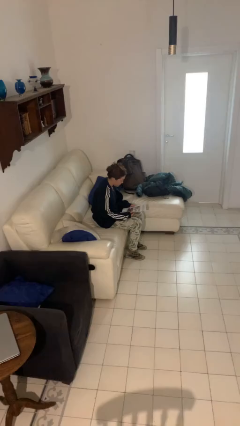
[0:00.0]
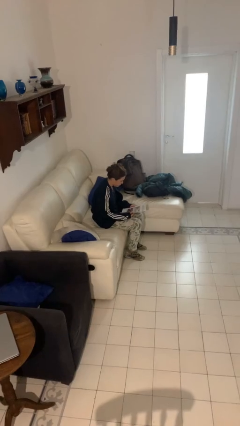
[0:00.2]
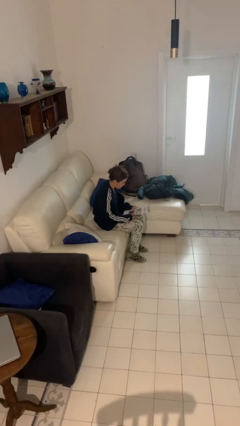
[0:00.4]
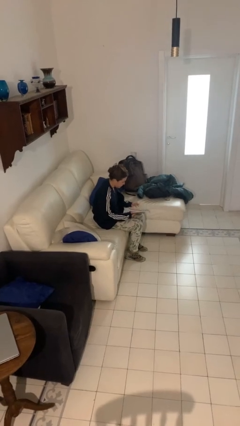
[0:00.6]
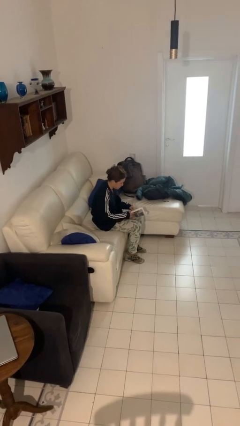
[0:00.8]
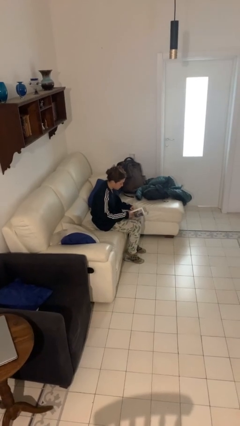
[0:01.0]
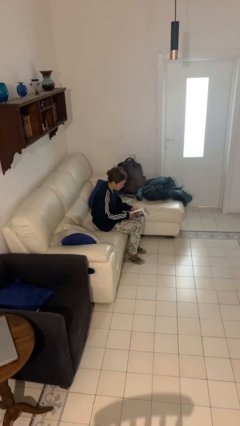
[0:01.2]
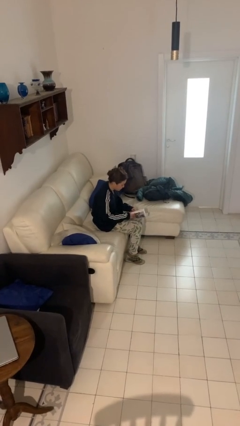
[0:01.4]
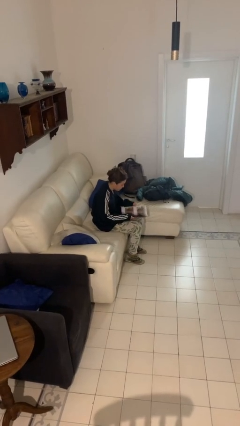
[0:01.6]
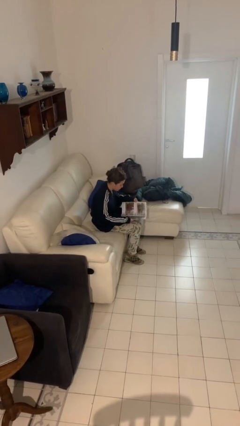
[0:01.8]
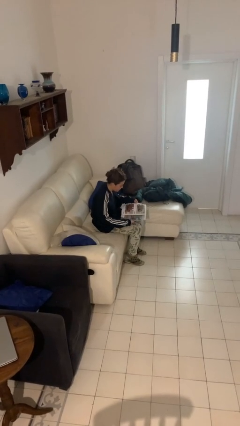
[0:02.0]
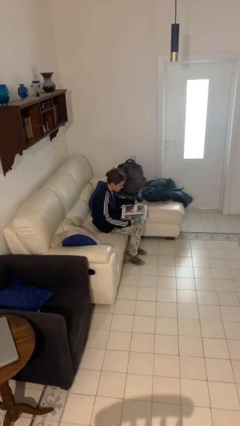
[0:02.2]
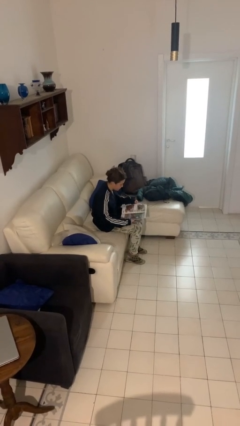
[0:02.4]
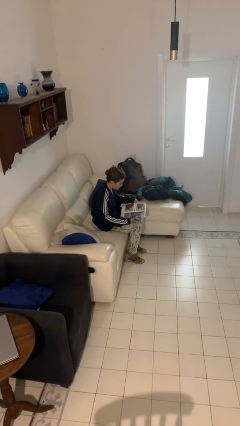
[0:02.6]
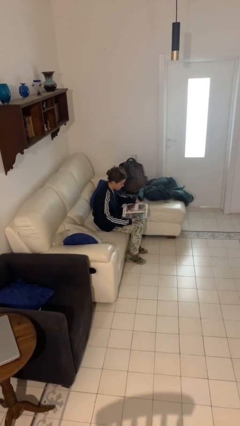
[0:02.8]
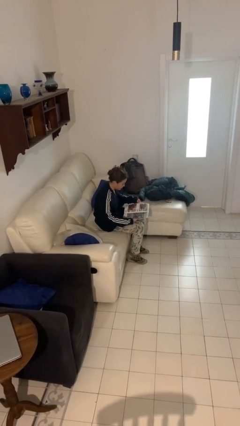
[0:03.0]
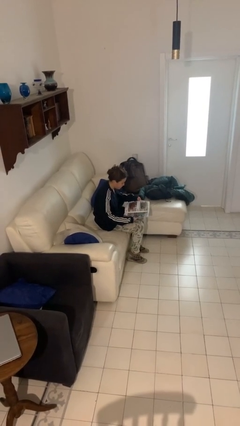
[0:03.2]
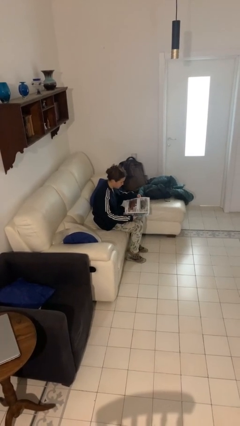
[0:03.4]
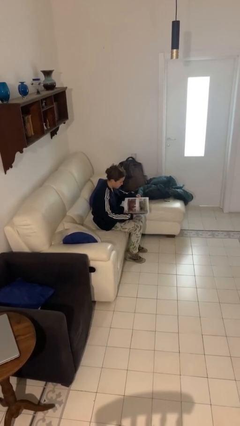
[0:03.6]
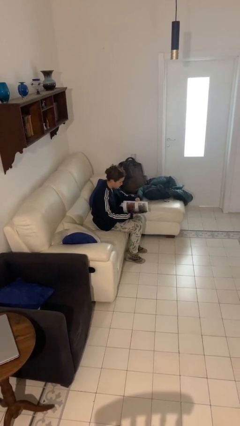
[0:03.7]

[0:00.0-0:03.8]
person reads magazine

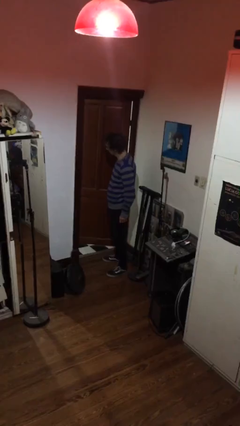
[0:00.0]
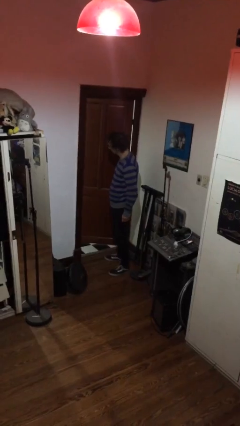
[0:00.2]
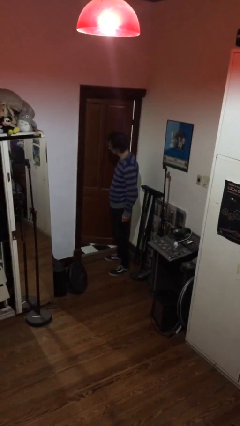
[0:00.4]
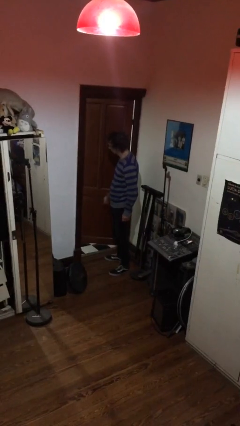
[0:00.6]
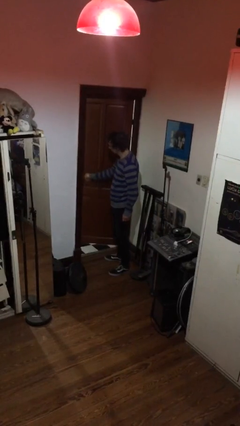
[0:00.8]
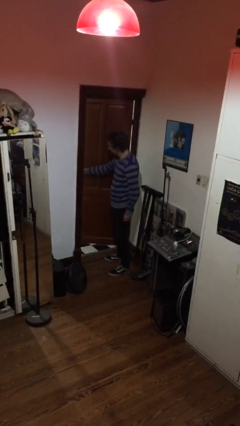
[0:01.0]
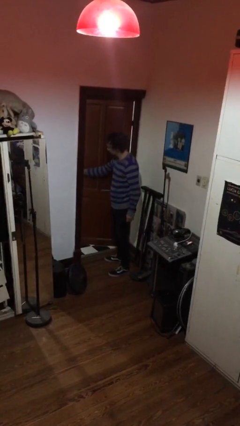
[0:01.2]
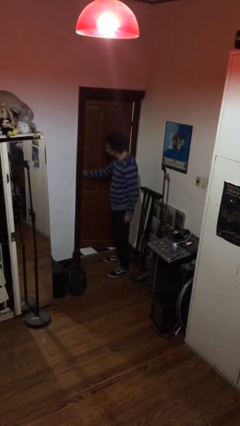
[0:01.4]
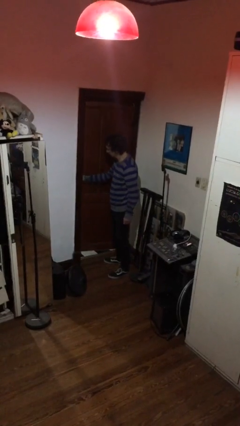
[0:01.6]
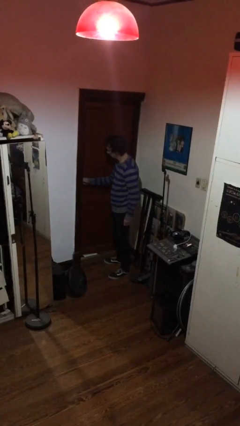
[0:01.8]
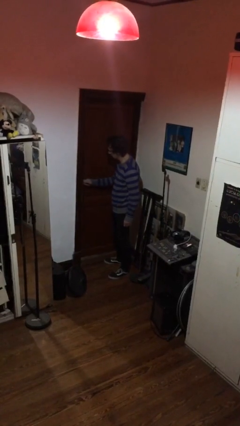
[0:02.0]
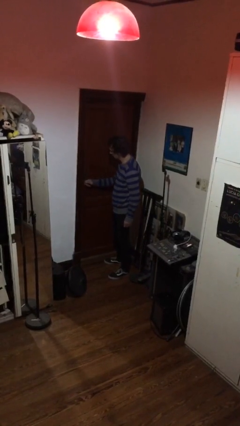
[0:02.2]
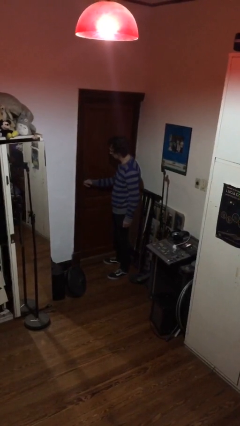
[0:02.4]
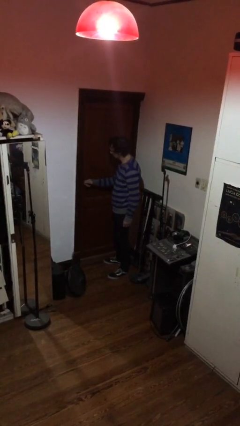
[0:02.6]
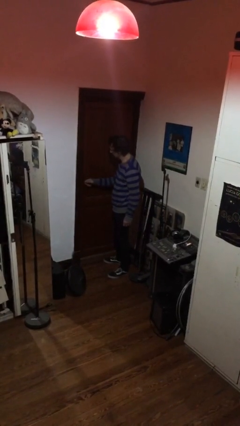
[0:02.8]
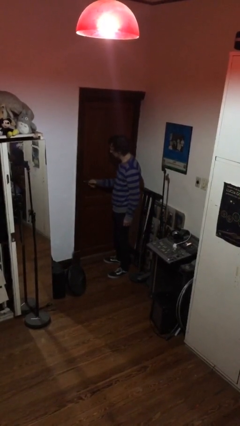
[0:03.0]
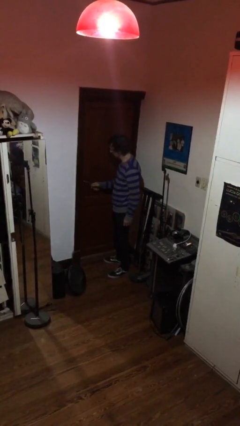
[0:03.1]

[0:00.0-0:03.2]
person closes facility door

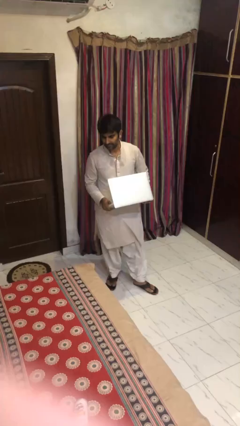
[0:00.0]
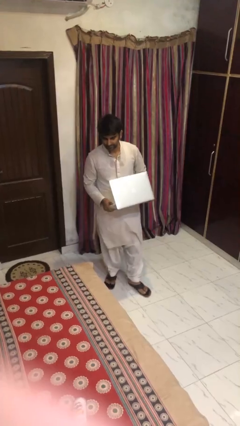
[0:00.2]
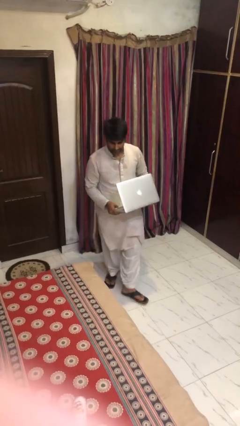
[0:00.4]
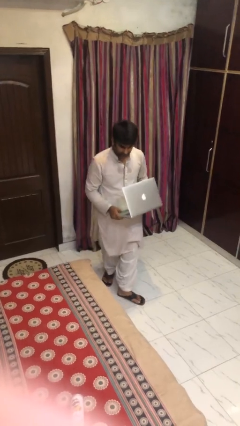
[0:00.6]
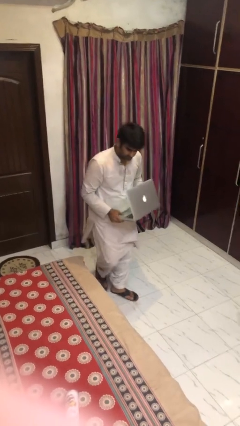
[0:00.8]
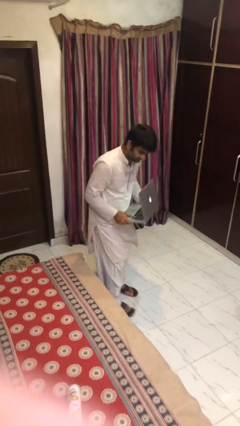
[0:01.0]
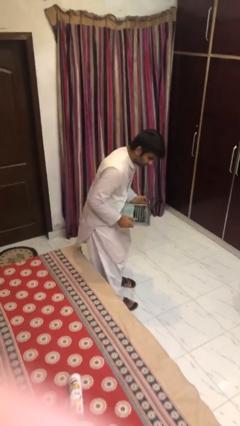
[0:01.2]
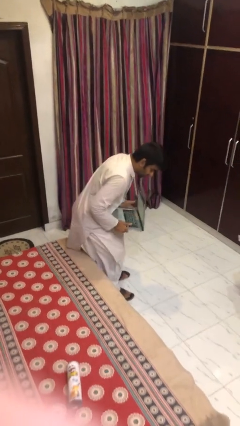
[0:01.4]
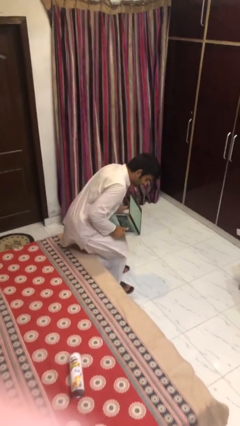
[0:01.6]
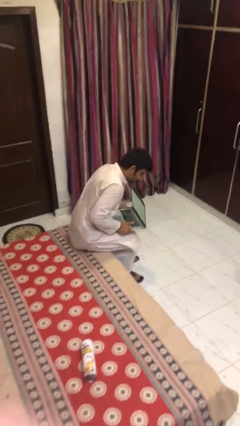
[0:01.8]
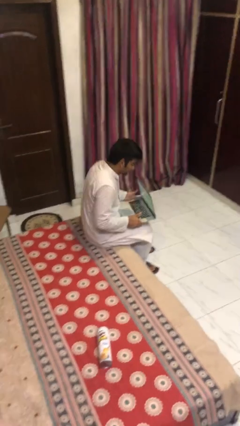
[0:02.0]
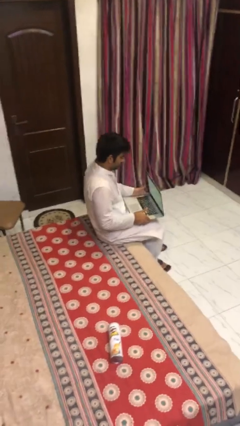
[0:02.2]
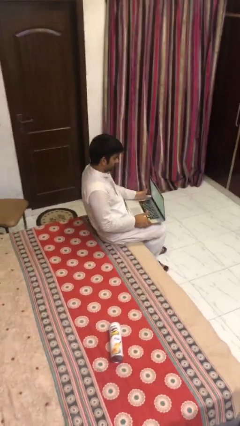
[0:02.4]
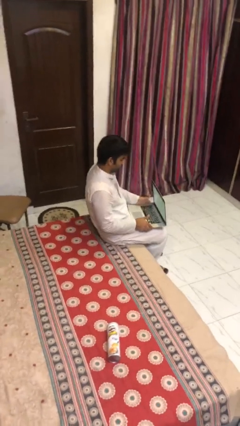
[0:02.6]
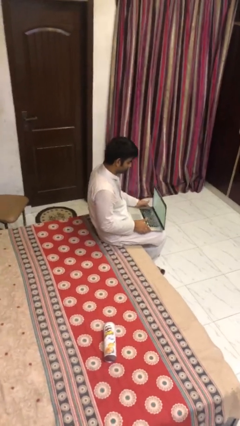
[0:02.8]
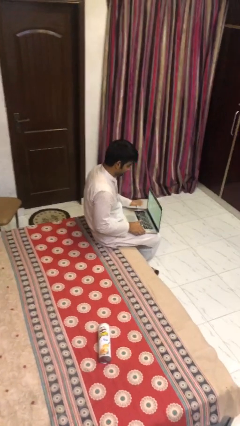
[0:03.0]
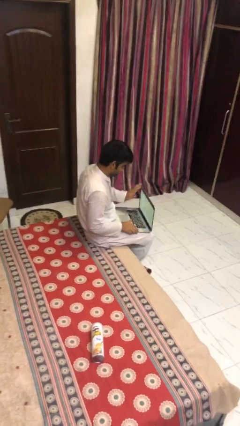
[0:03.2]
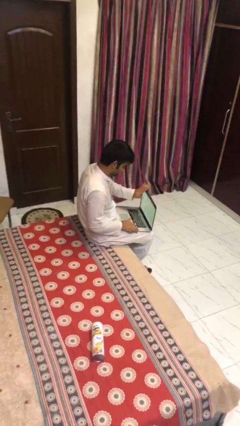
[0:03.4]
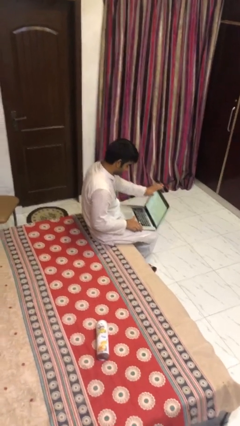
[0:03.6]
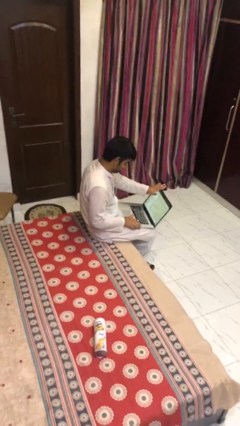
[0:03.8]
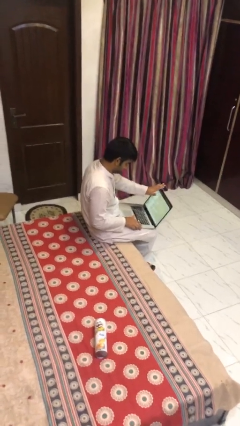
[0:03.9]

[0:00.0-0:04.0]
person sits down

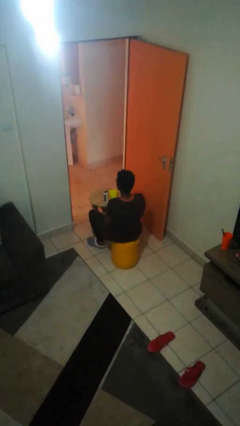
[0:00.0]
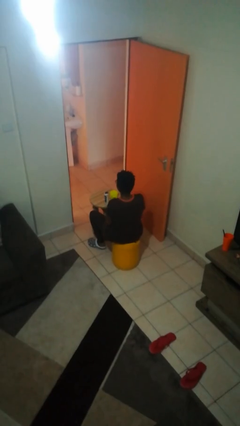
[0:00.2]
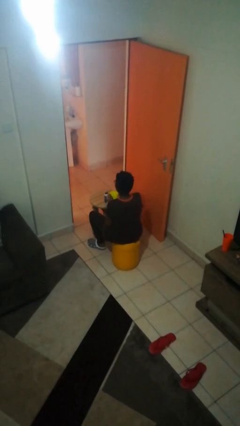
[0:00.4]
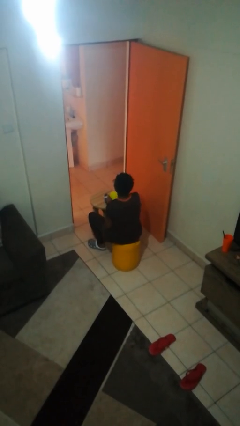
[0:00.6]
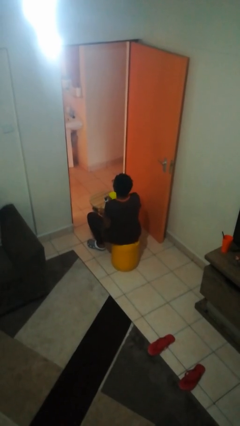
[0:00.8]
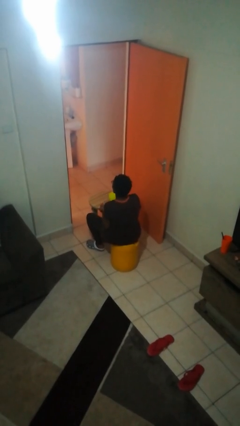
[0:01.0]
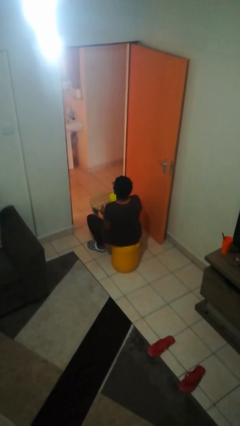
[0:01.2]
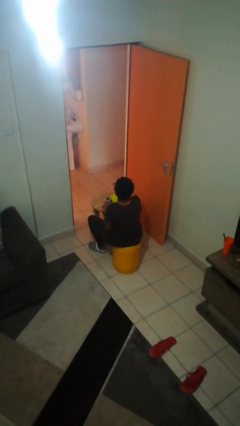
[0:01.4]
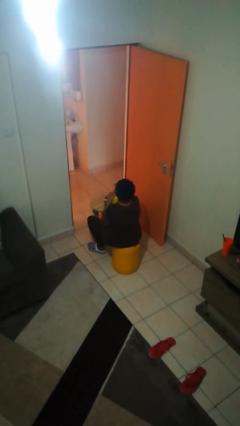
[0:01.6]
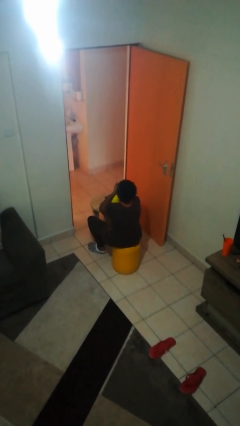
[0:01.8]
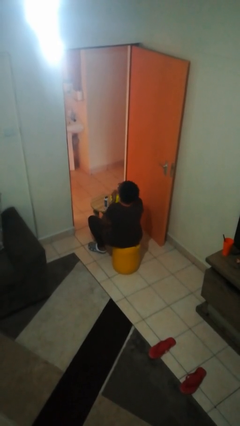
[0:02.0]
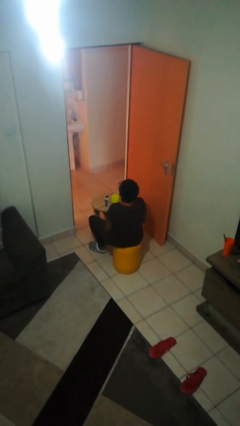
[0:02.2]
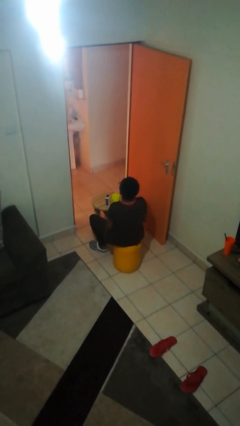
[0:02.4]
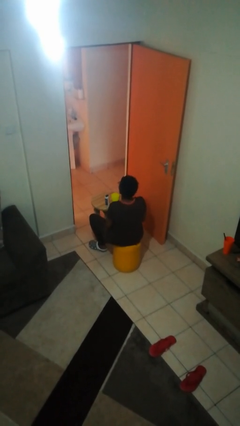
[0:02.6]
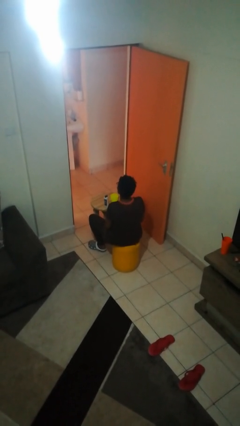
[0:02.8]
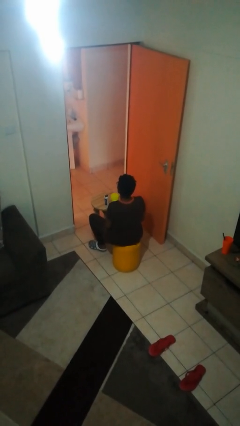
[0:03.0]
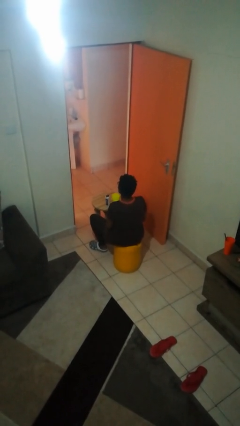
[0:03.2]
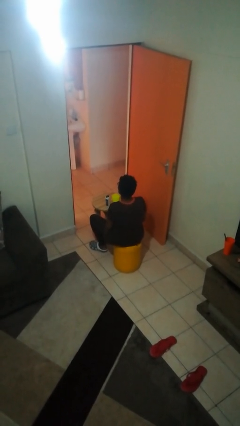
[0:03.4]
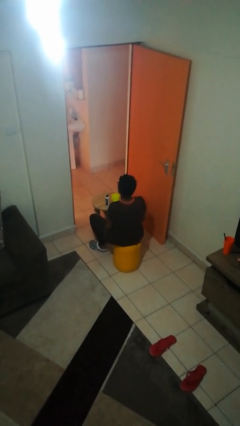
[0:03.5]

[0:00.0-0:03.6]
person takes medicine pills

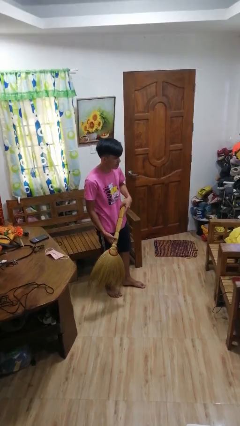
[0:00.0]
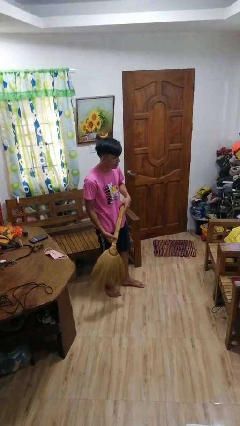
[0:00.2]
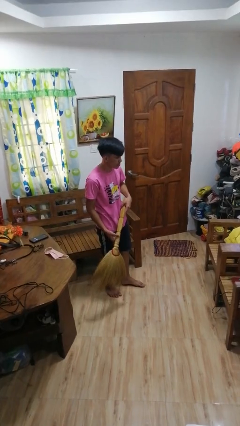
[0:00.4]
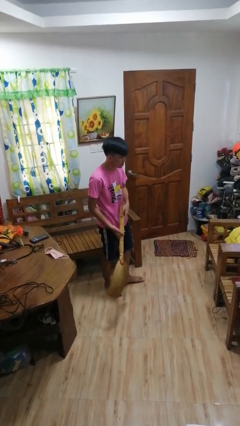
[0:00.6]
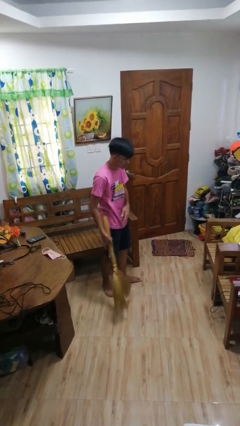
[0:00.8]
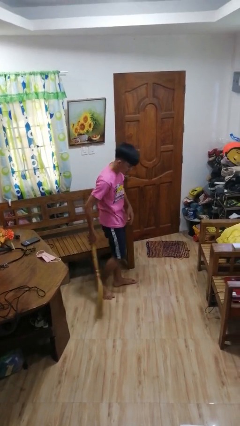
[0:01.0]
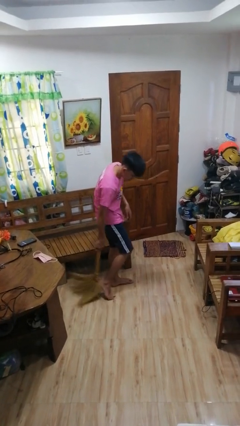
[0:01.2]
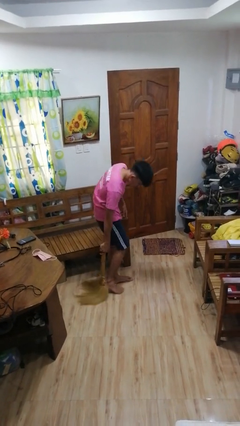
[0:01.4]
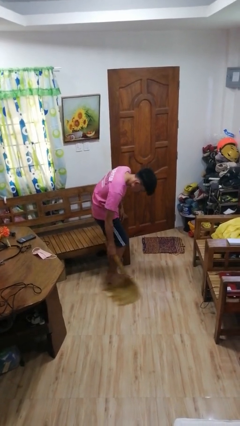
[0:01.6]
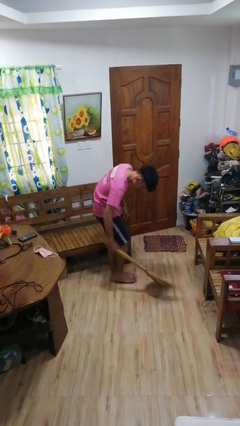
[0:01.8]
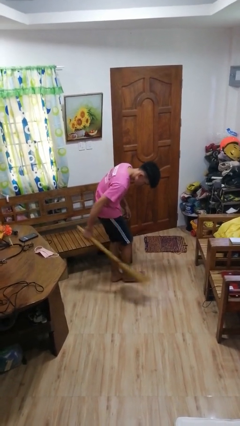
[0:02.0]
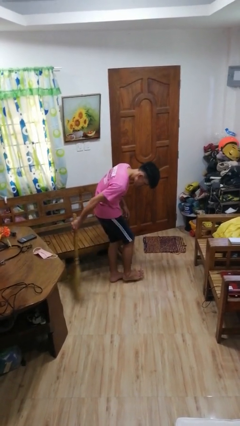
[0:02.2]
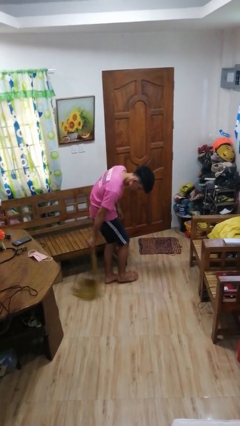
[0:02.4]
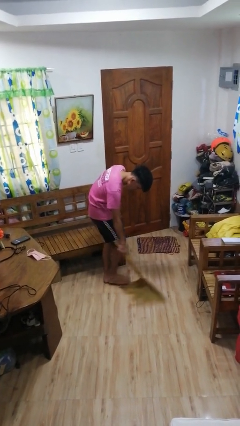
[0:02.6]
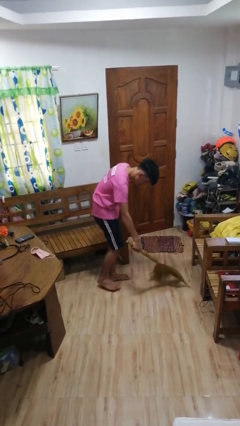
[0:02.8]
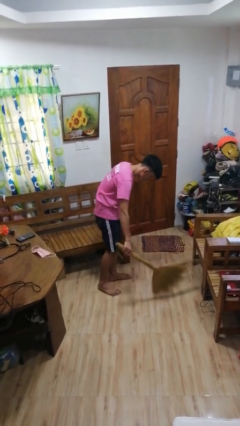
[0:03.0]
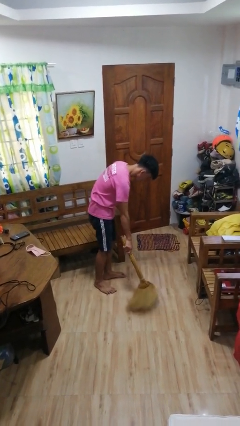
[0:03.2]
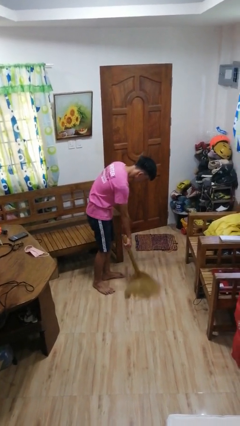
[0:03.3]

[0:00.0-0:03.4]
person sweeps floor
